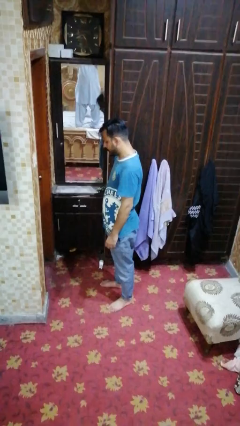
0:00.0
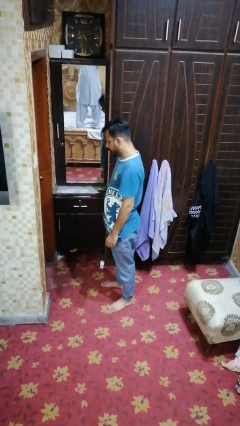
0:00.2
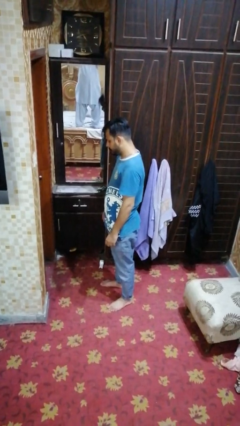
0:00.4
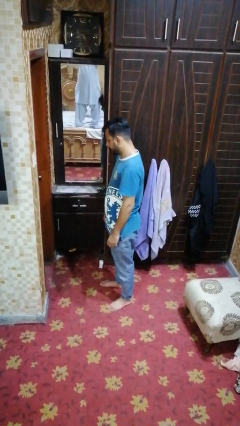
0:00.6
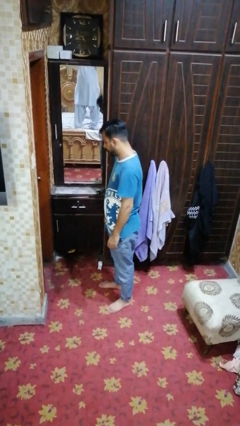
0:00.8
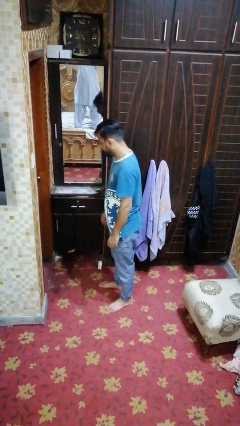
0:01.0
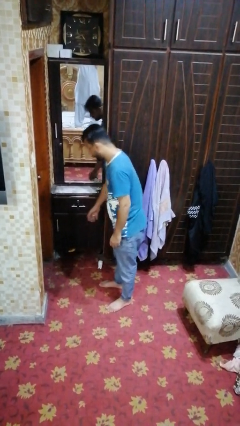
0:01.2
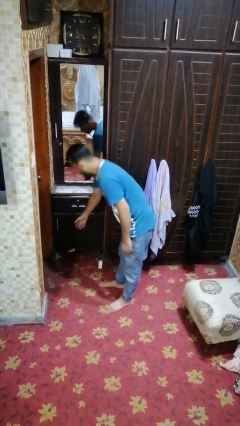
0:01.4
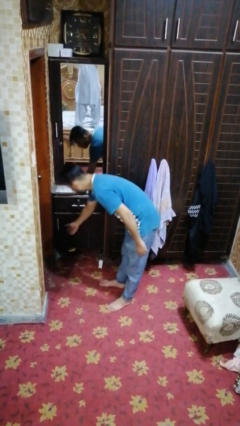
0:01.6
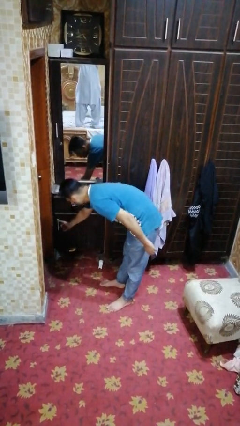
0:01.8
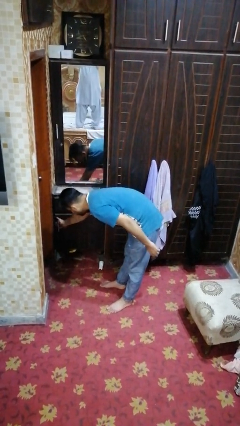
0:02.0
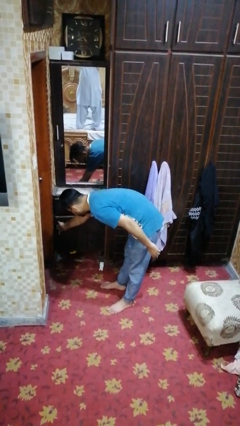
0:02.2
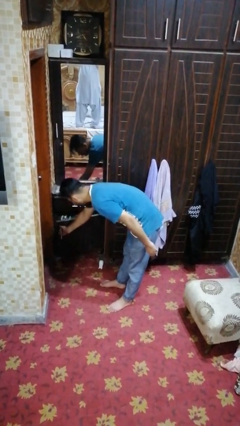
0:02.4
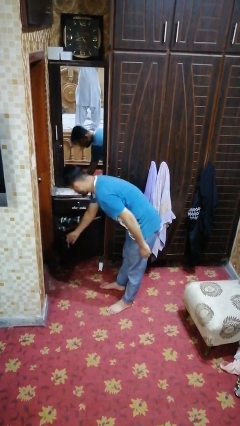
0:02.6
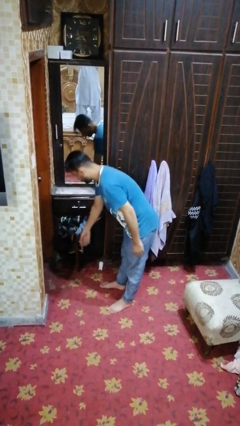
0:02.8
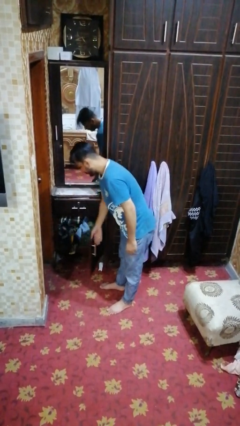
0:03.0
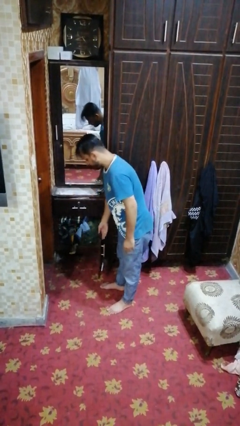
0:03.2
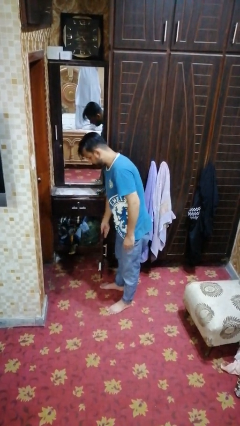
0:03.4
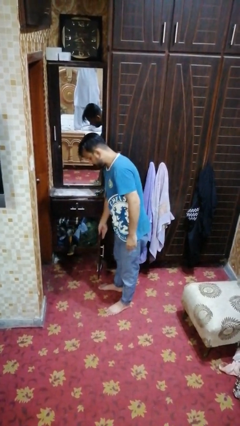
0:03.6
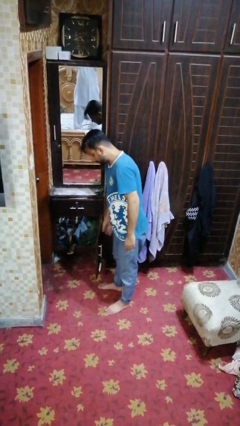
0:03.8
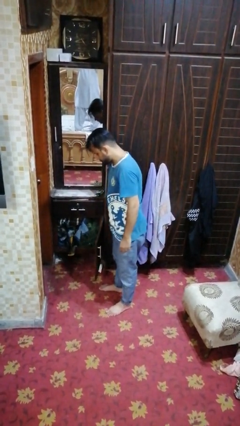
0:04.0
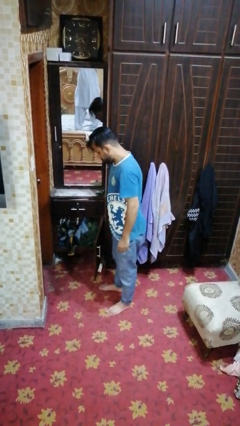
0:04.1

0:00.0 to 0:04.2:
person opens dresser drawer

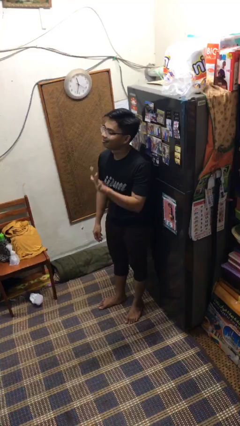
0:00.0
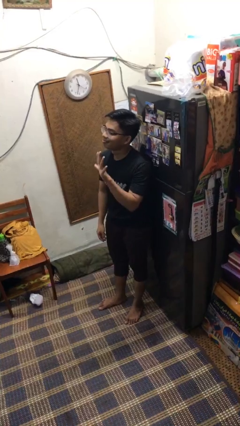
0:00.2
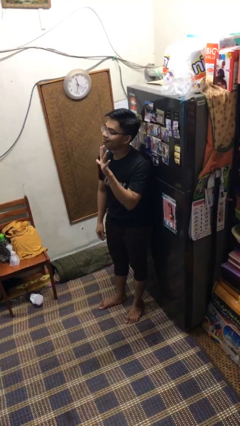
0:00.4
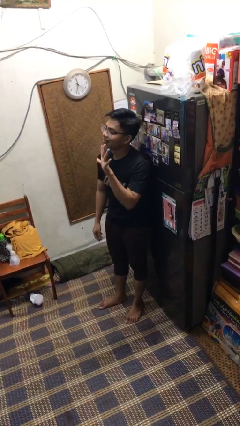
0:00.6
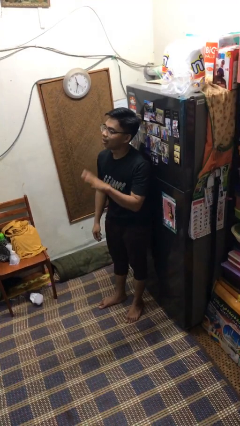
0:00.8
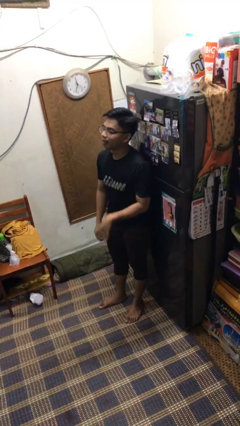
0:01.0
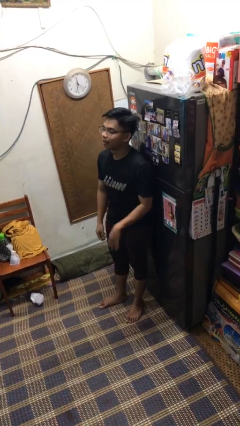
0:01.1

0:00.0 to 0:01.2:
person gestures number five

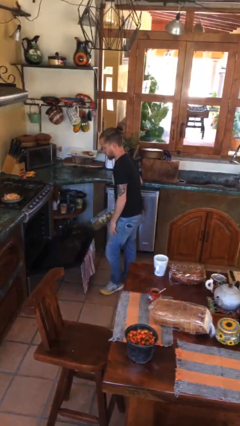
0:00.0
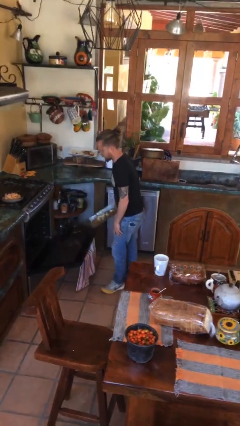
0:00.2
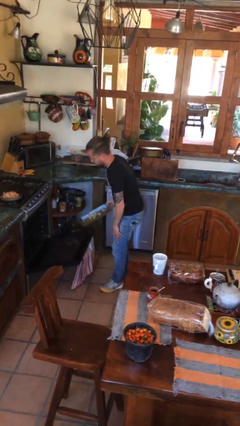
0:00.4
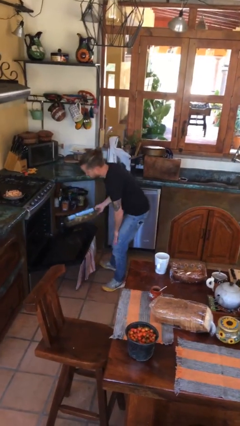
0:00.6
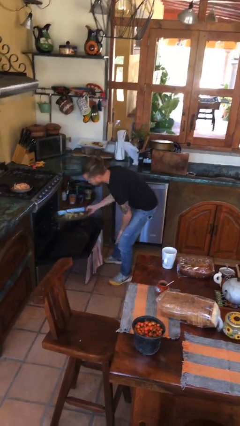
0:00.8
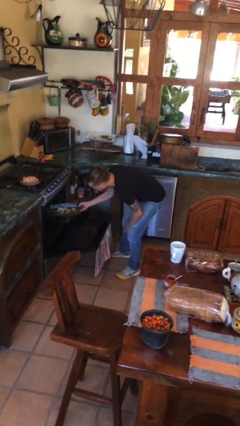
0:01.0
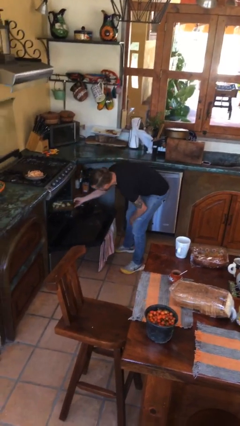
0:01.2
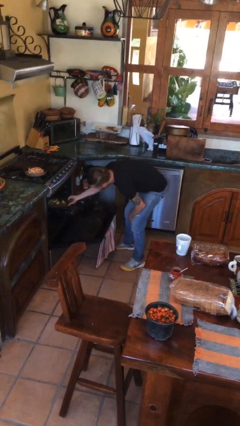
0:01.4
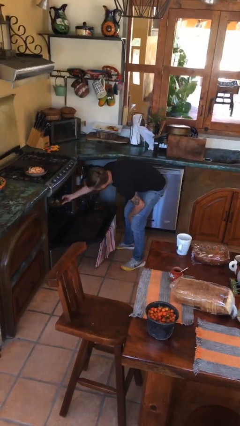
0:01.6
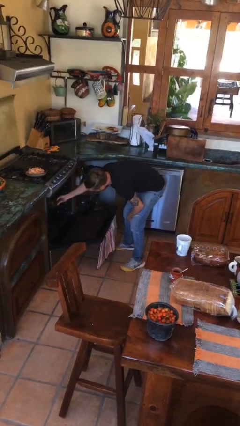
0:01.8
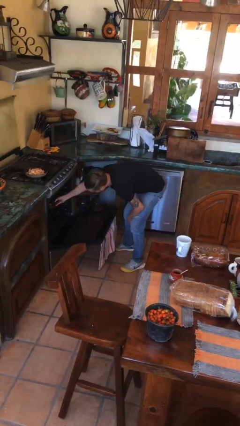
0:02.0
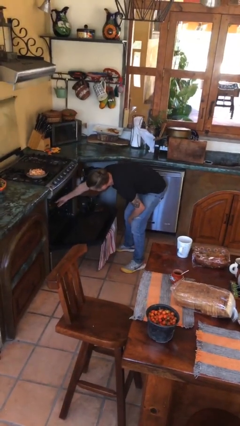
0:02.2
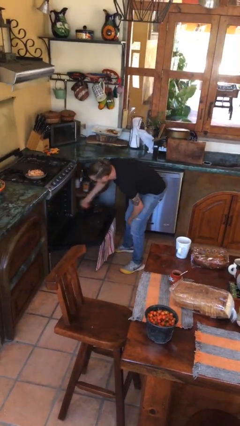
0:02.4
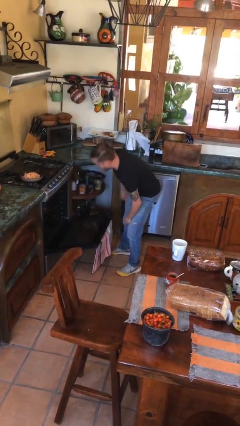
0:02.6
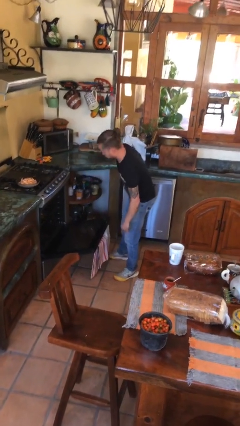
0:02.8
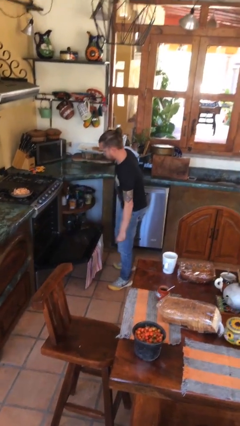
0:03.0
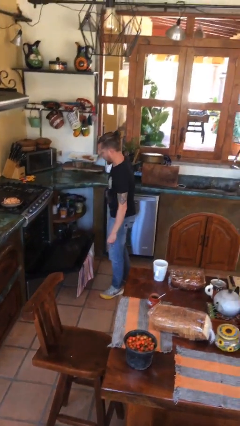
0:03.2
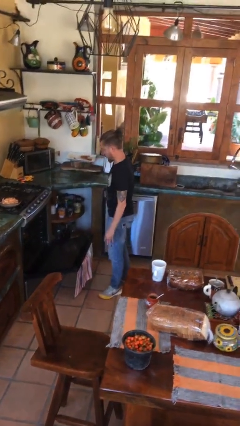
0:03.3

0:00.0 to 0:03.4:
person puts object into oven

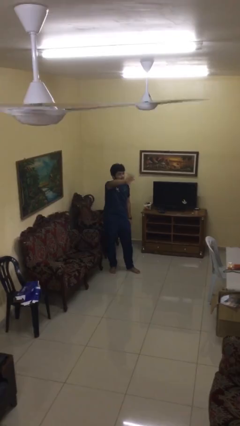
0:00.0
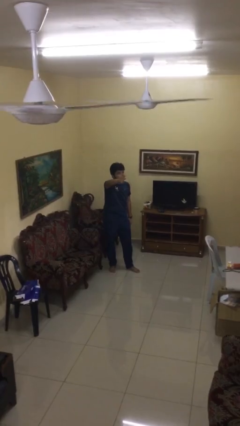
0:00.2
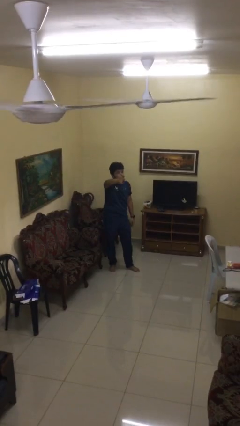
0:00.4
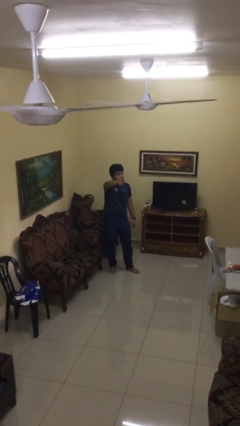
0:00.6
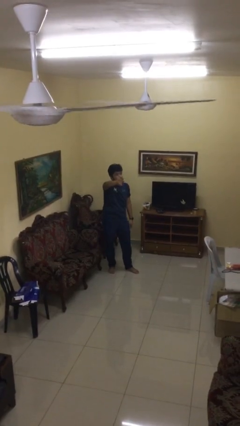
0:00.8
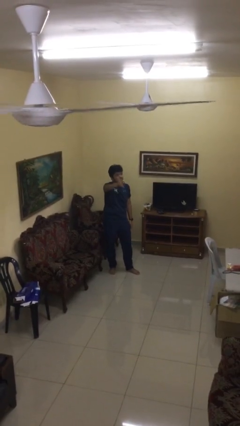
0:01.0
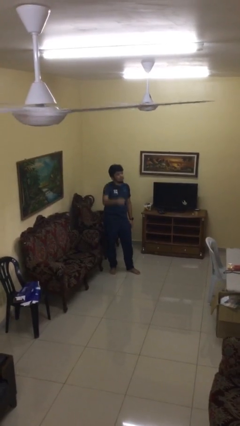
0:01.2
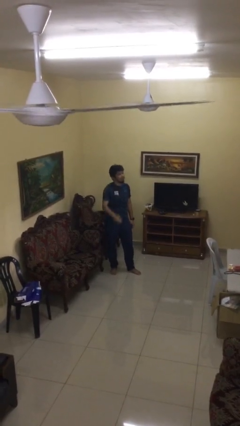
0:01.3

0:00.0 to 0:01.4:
person gestures swipe right

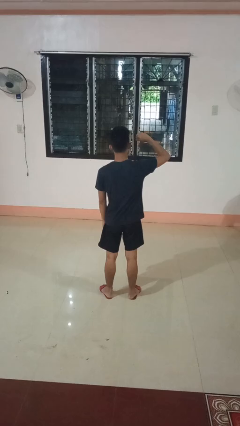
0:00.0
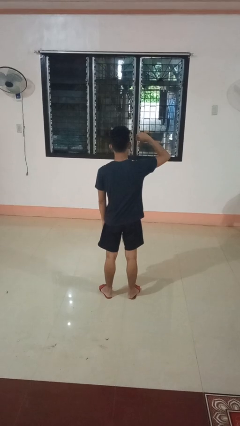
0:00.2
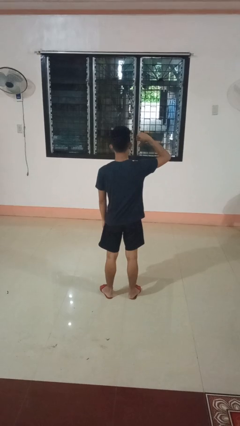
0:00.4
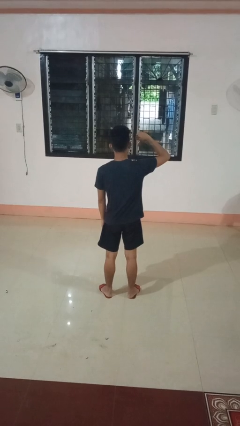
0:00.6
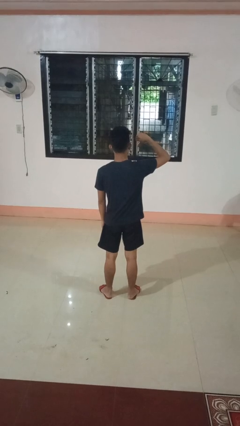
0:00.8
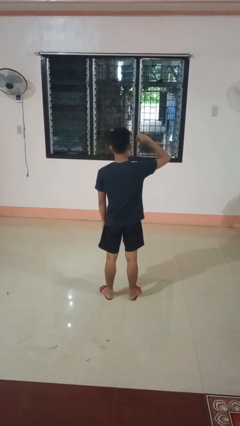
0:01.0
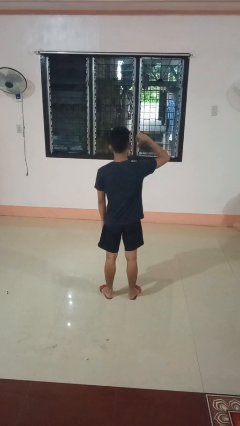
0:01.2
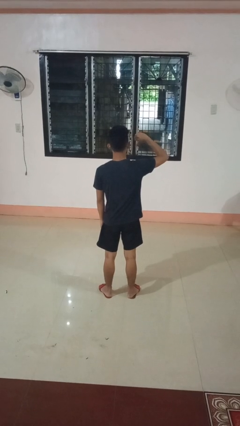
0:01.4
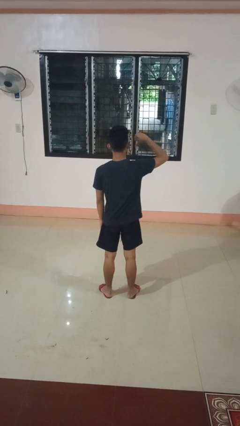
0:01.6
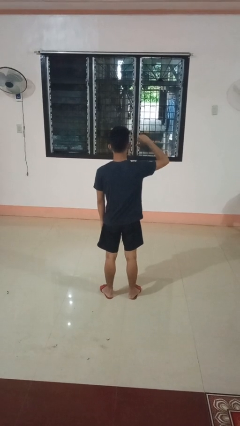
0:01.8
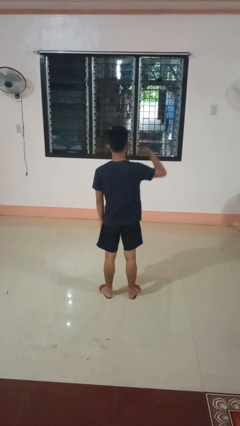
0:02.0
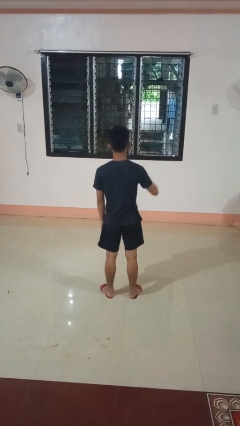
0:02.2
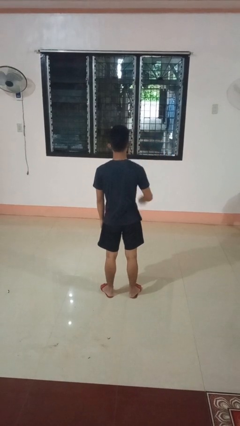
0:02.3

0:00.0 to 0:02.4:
person gestures thumbs down

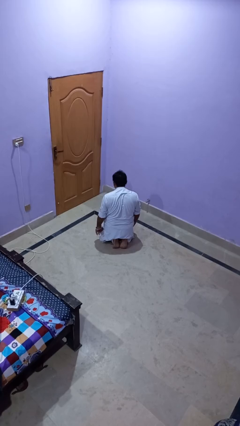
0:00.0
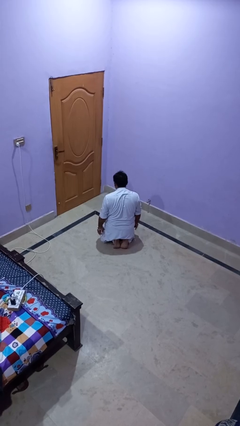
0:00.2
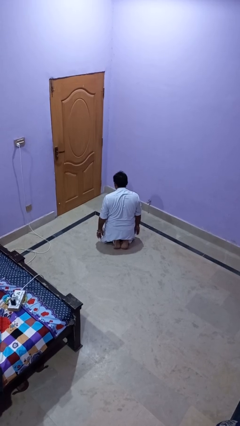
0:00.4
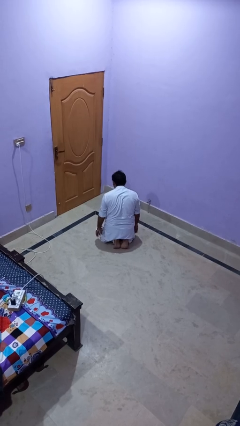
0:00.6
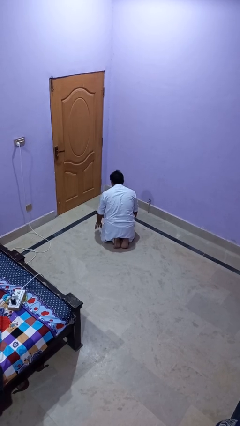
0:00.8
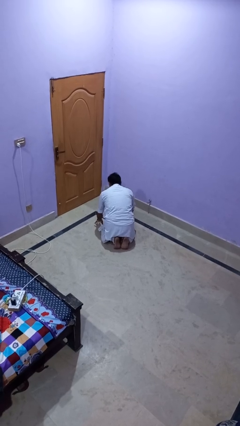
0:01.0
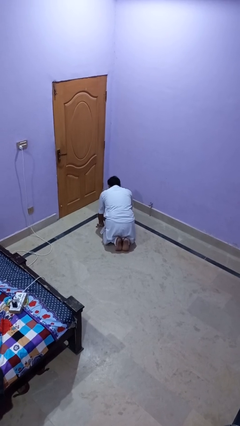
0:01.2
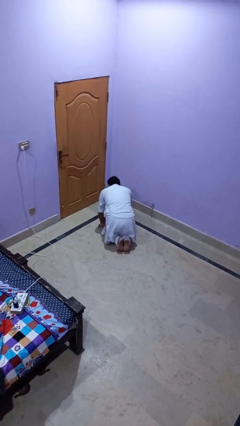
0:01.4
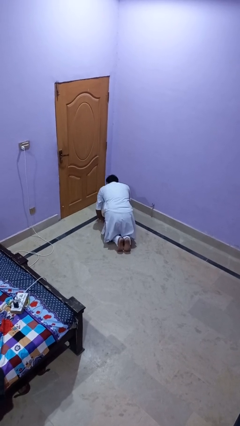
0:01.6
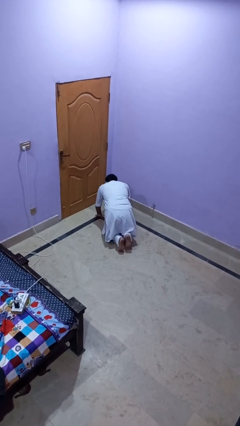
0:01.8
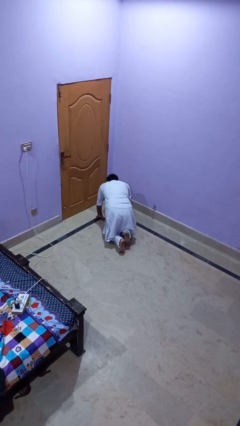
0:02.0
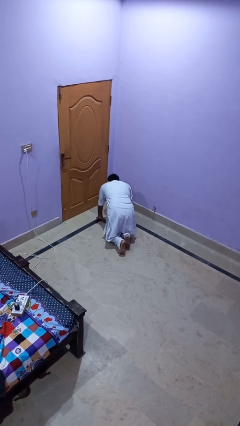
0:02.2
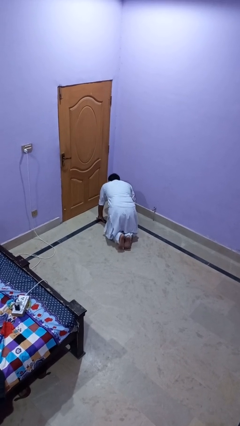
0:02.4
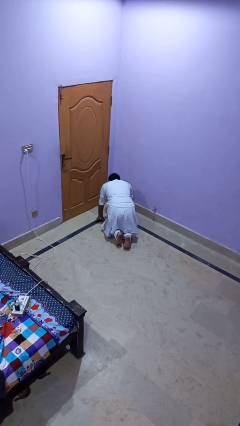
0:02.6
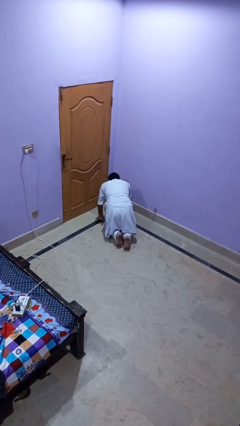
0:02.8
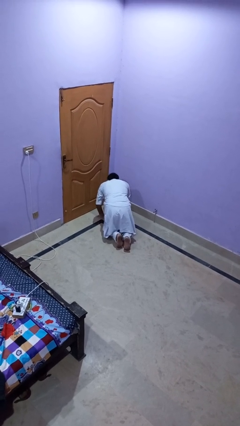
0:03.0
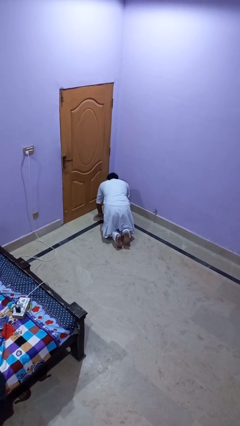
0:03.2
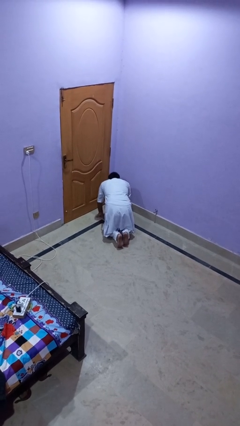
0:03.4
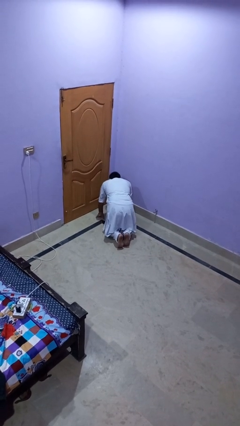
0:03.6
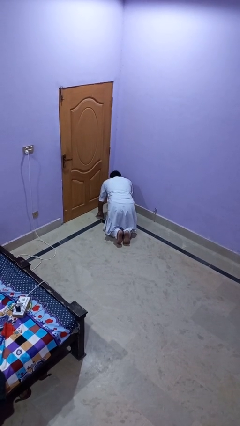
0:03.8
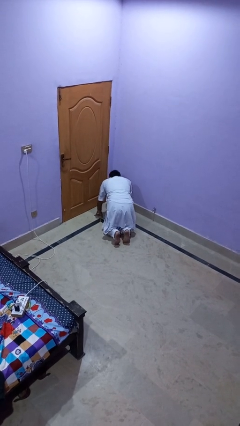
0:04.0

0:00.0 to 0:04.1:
person crawls

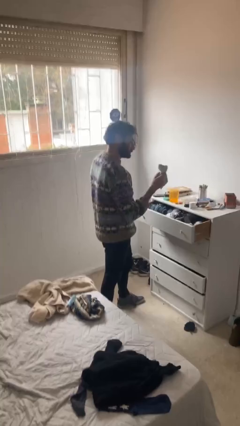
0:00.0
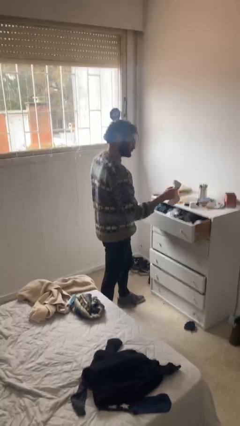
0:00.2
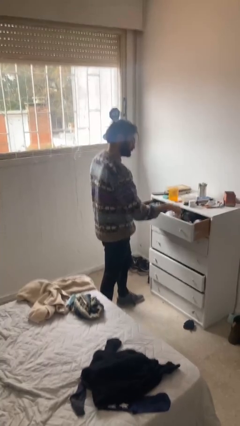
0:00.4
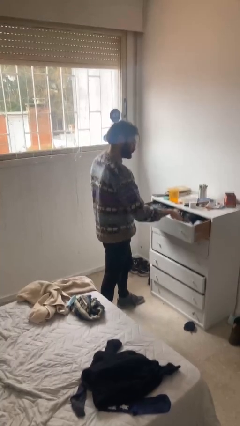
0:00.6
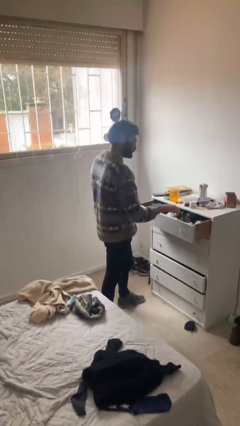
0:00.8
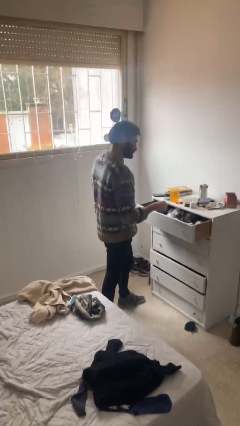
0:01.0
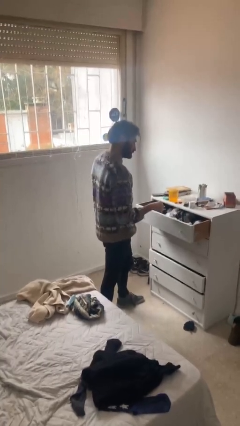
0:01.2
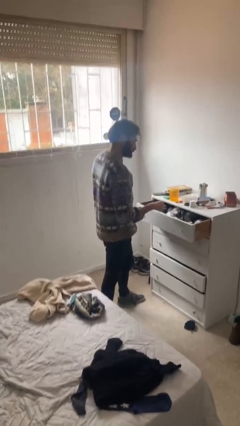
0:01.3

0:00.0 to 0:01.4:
person puts clothes into dresser
